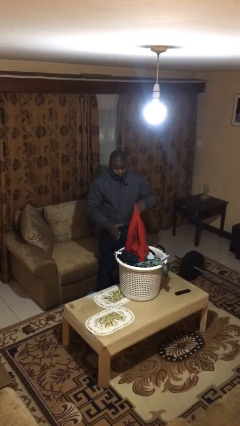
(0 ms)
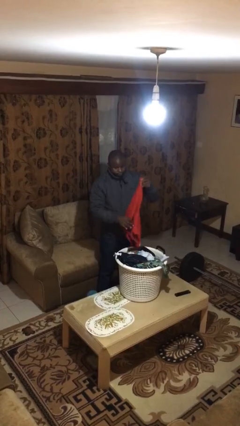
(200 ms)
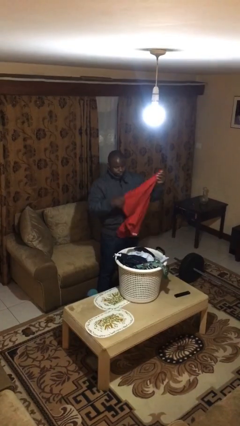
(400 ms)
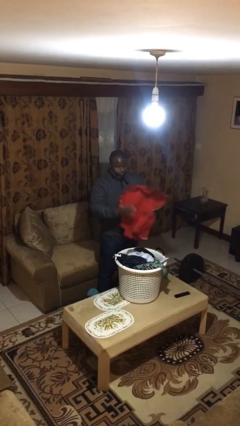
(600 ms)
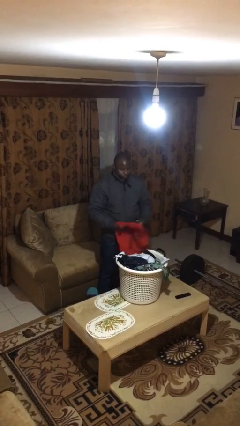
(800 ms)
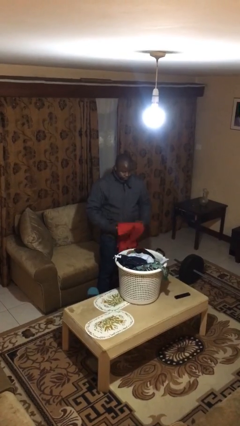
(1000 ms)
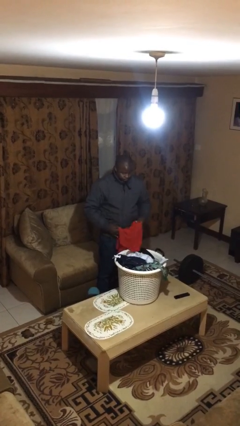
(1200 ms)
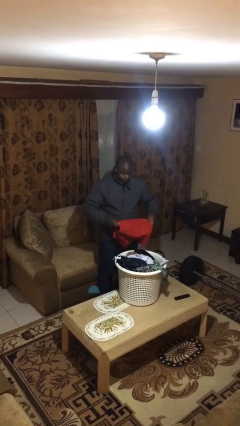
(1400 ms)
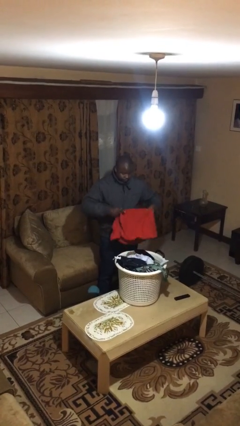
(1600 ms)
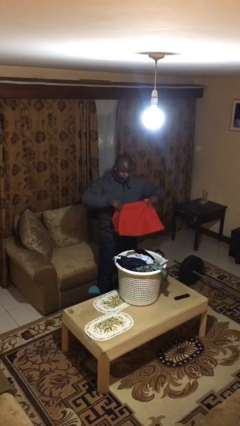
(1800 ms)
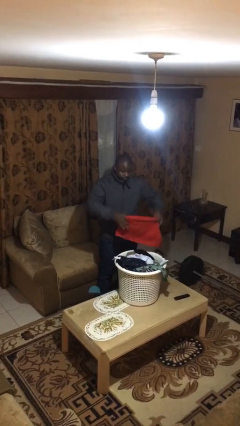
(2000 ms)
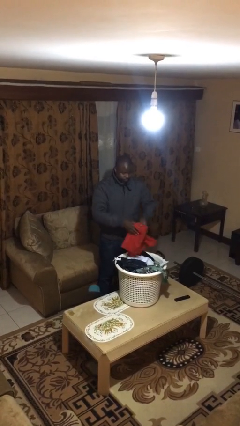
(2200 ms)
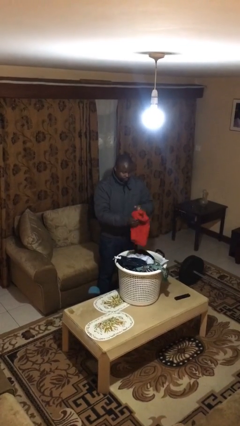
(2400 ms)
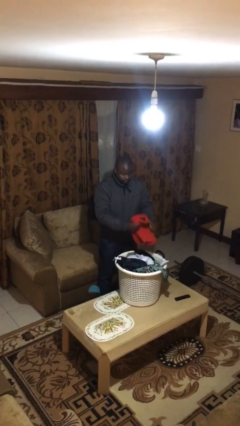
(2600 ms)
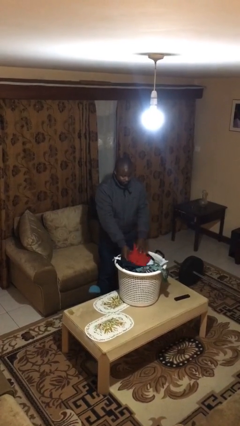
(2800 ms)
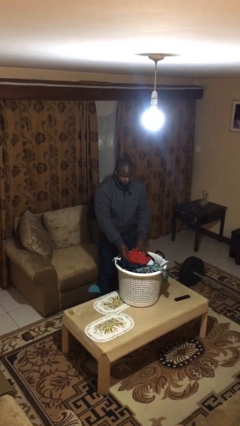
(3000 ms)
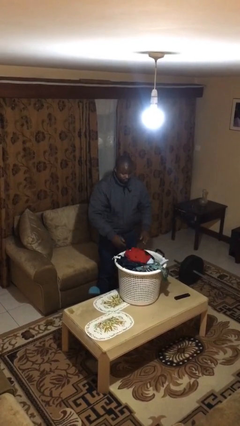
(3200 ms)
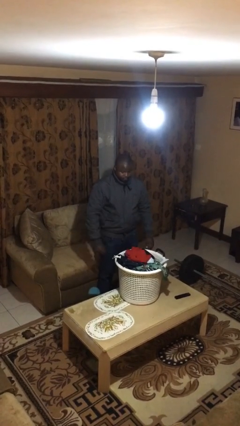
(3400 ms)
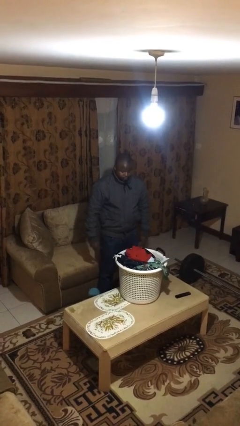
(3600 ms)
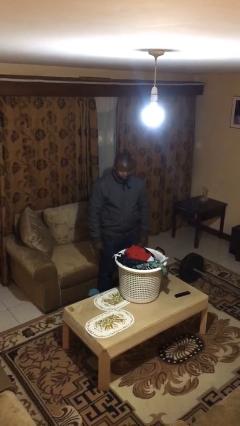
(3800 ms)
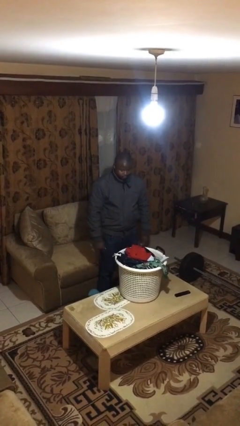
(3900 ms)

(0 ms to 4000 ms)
person folds shirt

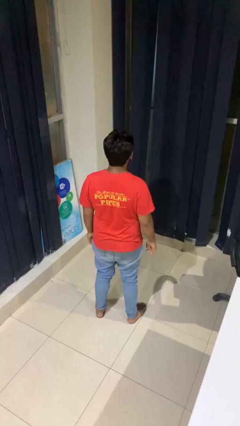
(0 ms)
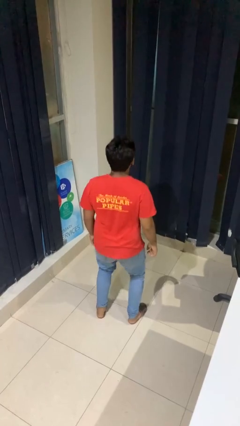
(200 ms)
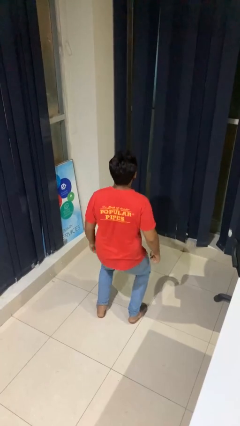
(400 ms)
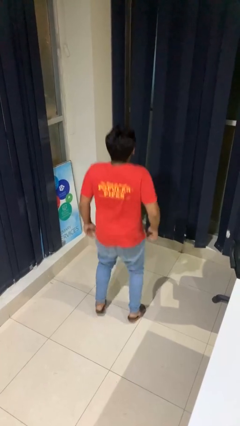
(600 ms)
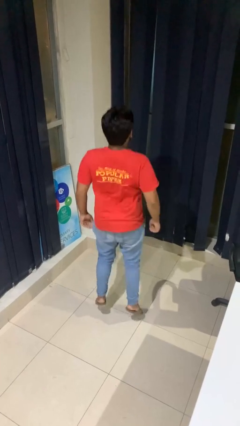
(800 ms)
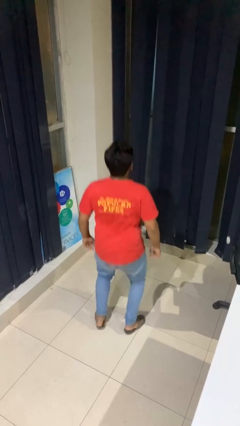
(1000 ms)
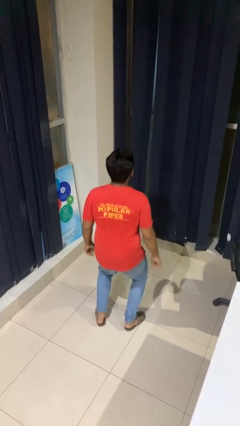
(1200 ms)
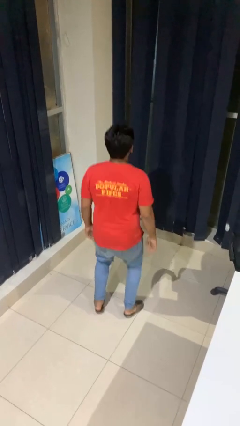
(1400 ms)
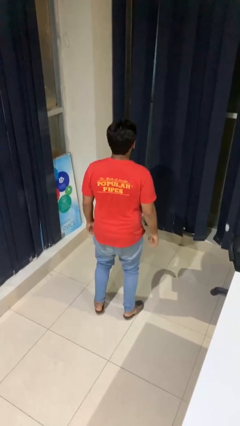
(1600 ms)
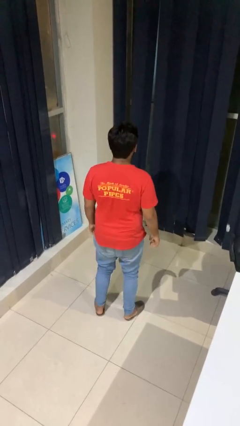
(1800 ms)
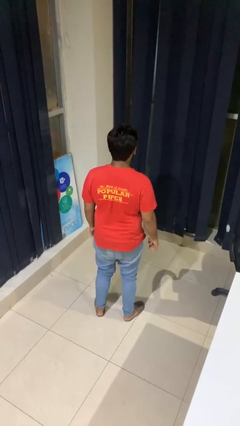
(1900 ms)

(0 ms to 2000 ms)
person jumps

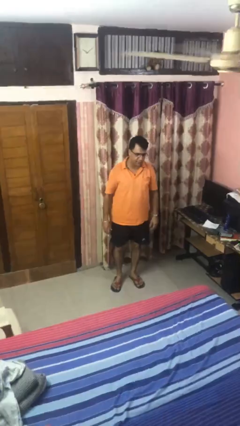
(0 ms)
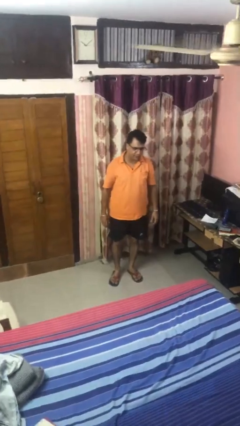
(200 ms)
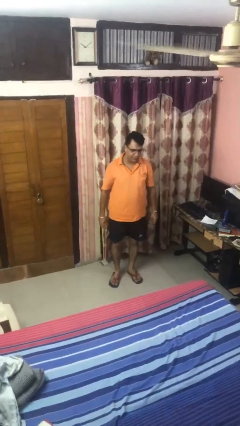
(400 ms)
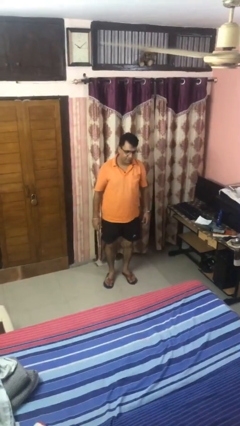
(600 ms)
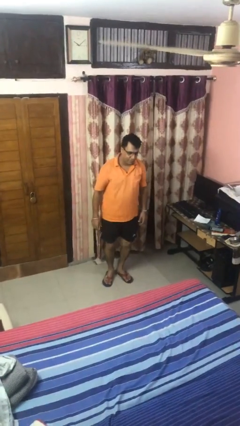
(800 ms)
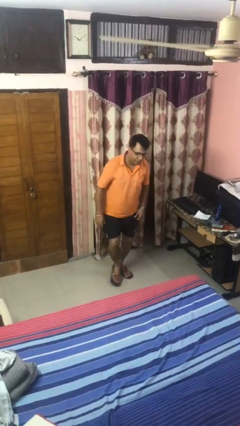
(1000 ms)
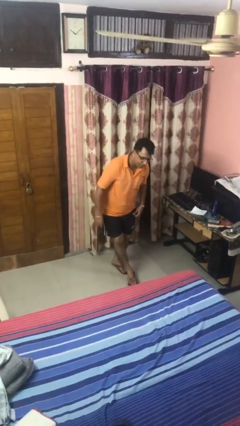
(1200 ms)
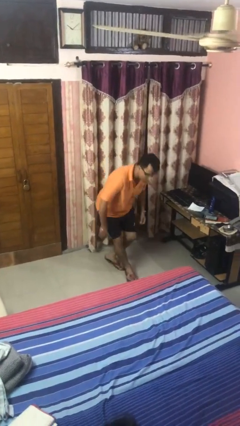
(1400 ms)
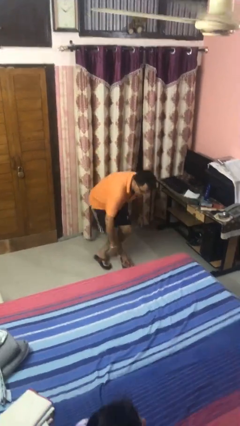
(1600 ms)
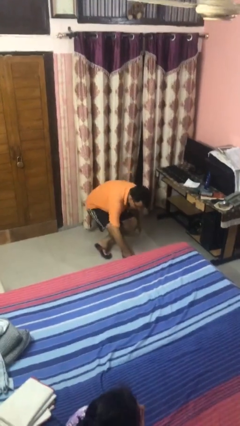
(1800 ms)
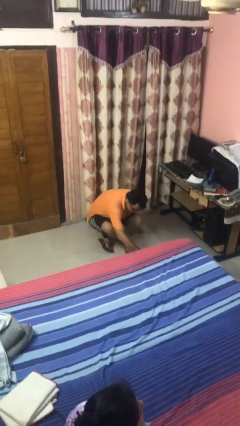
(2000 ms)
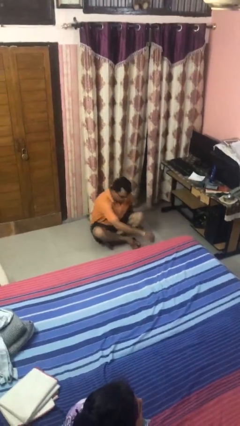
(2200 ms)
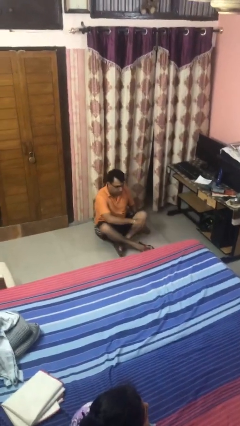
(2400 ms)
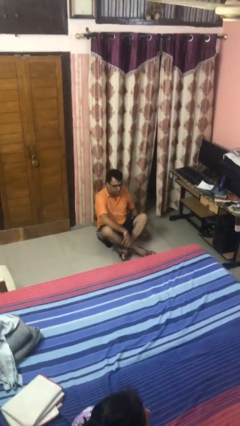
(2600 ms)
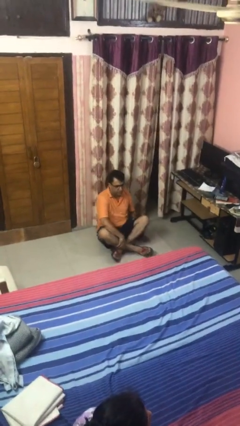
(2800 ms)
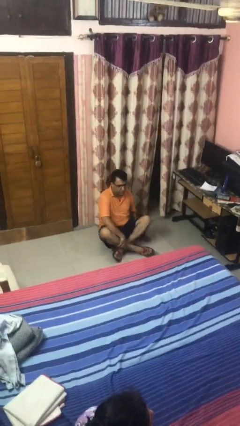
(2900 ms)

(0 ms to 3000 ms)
person sits crisscross

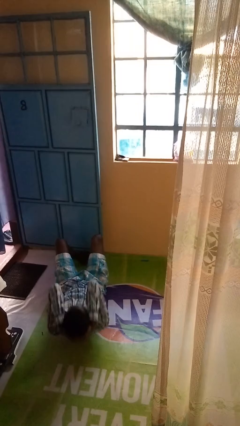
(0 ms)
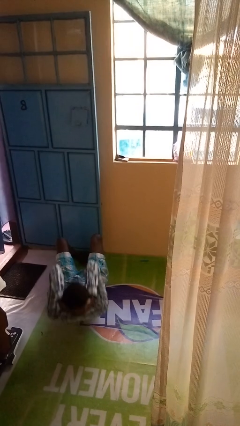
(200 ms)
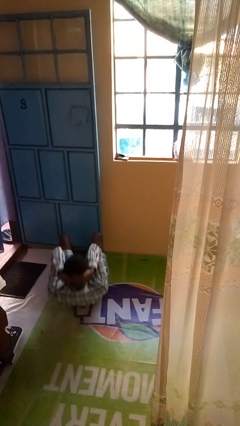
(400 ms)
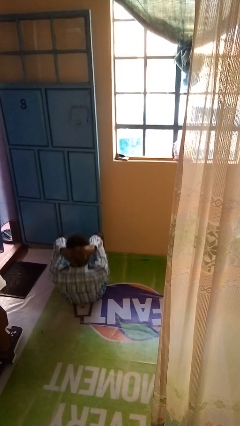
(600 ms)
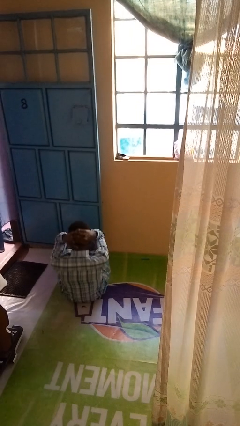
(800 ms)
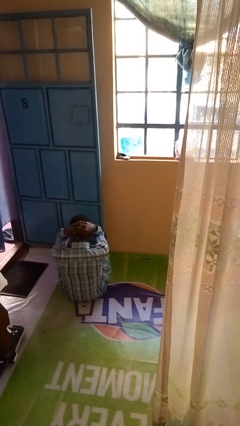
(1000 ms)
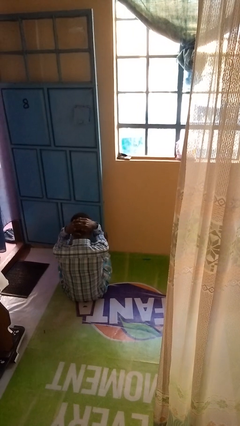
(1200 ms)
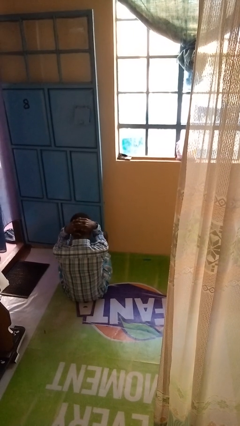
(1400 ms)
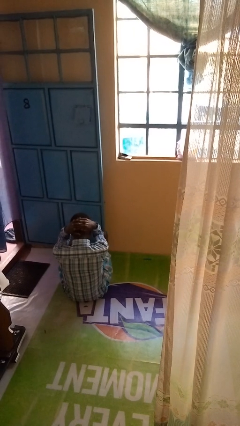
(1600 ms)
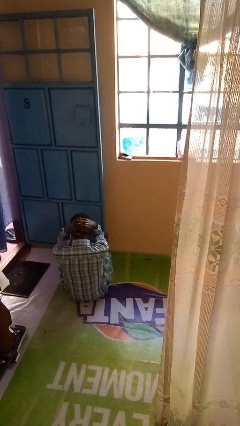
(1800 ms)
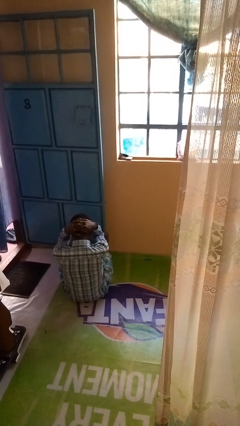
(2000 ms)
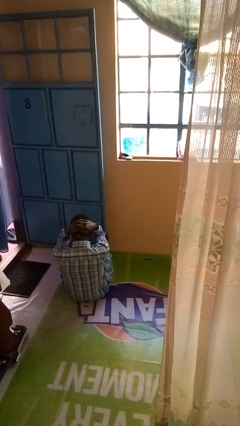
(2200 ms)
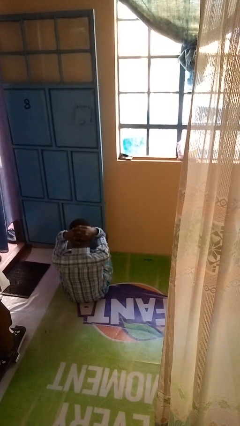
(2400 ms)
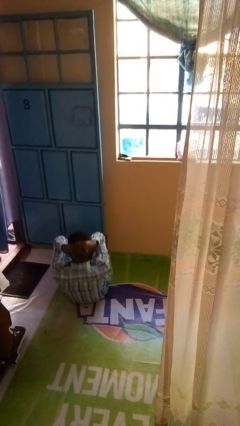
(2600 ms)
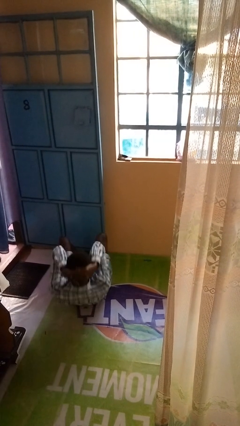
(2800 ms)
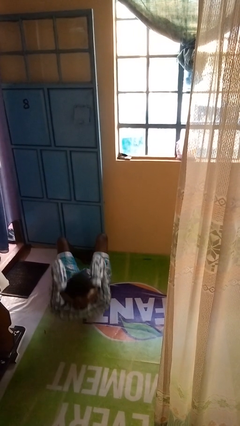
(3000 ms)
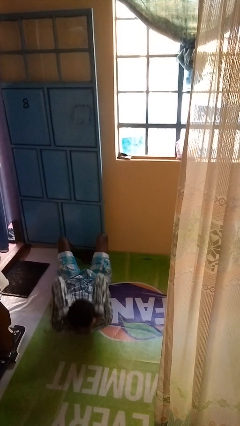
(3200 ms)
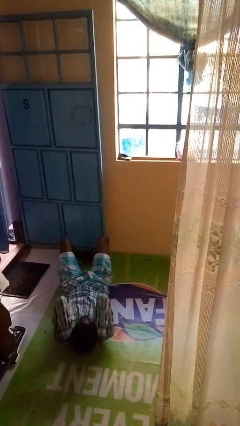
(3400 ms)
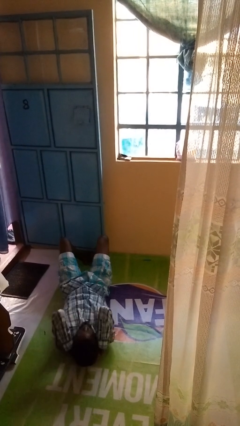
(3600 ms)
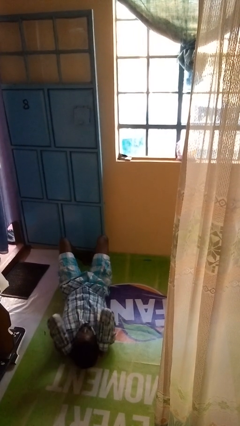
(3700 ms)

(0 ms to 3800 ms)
person exercises with situp

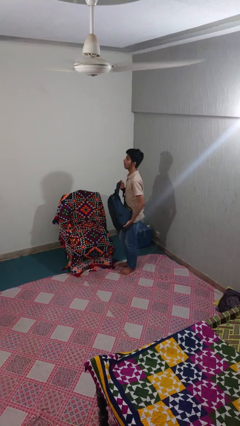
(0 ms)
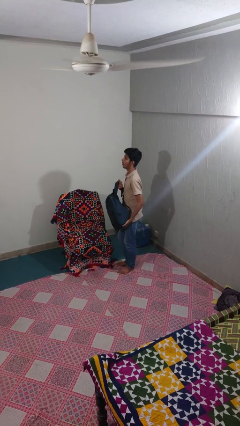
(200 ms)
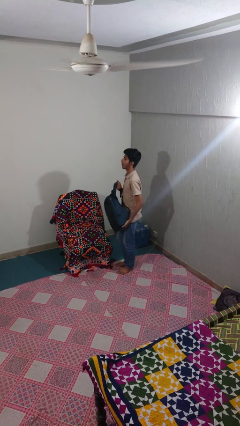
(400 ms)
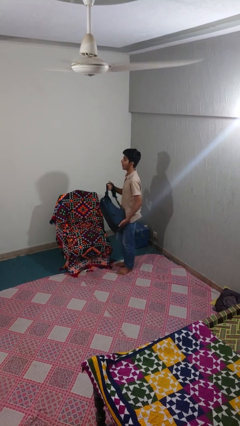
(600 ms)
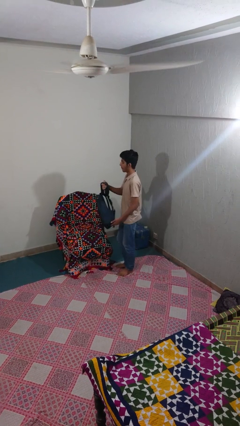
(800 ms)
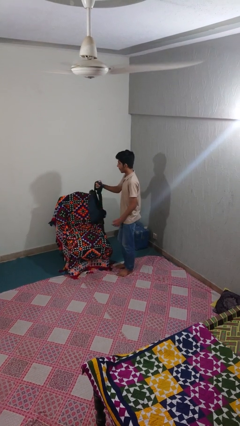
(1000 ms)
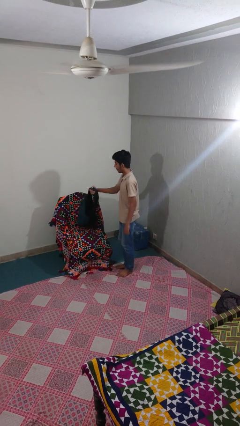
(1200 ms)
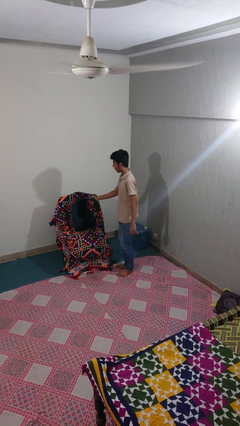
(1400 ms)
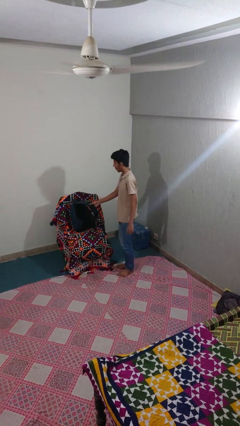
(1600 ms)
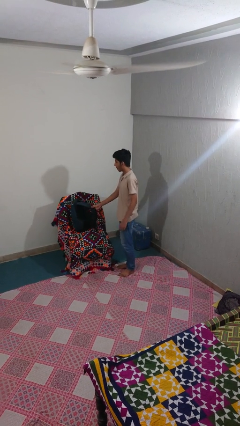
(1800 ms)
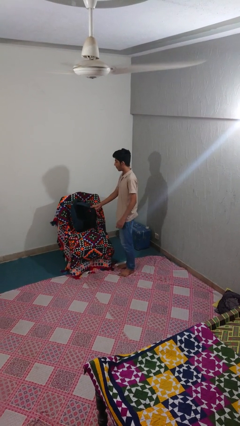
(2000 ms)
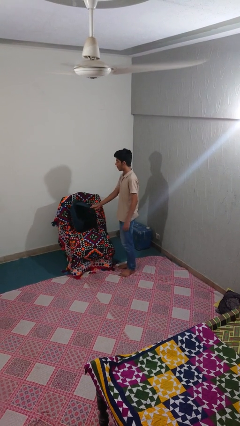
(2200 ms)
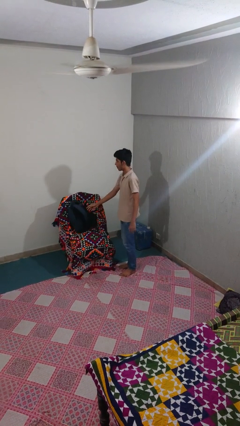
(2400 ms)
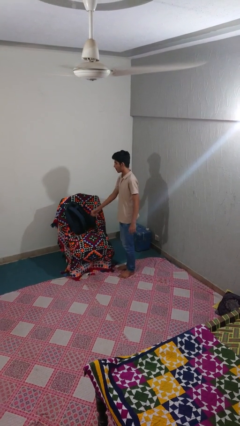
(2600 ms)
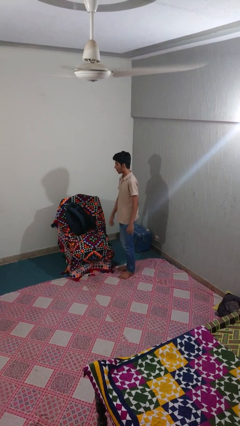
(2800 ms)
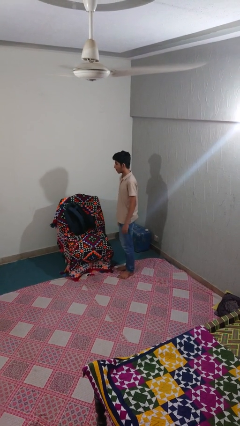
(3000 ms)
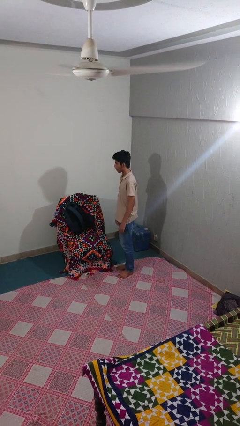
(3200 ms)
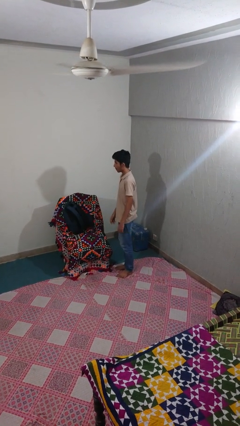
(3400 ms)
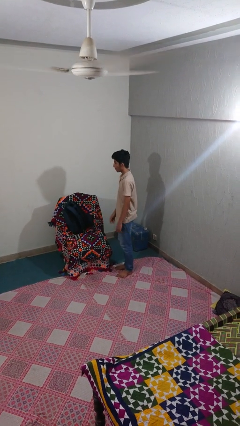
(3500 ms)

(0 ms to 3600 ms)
person puts down object on couch

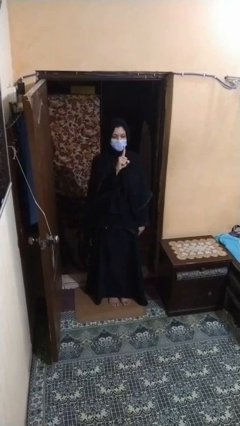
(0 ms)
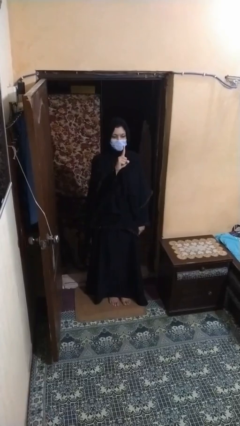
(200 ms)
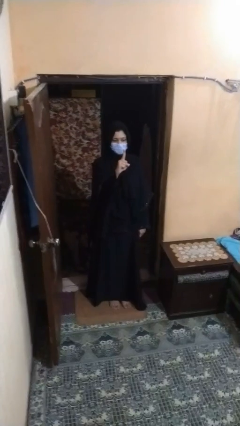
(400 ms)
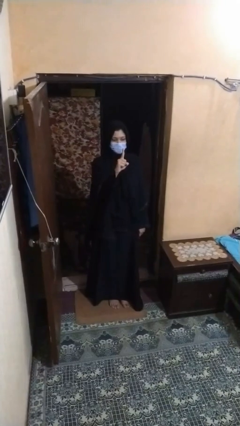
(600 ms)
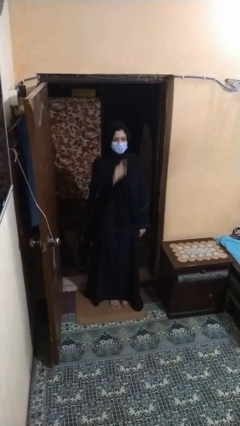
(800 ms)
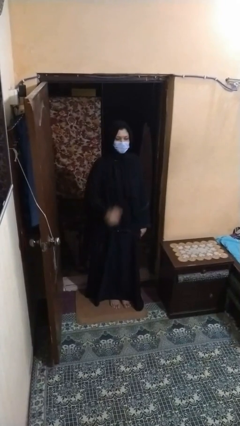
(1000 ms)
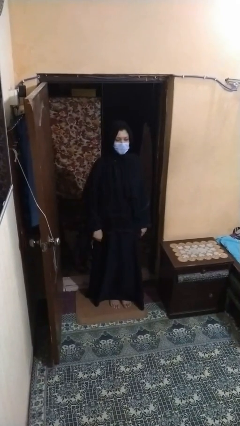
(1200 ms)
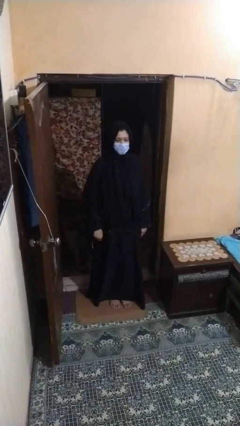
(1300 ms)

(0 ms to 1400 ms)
person gestures number one
